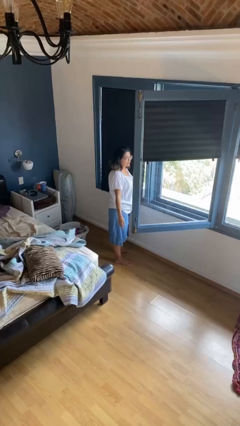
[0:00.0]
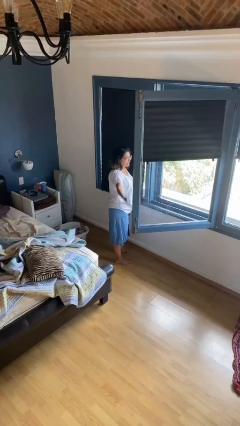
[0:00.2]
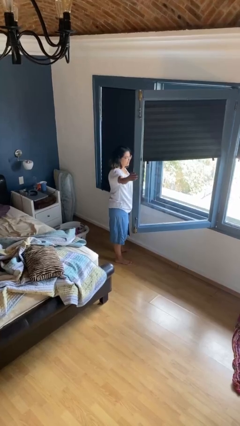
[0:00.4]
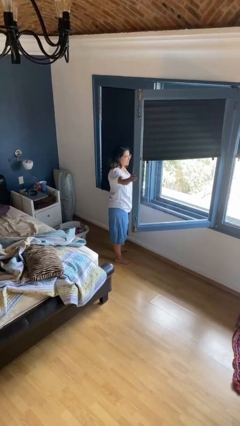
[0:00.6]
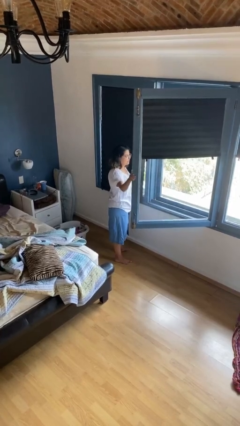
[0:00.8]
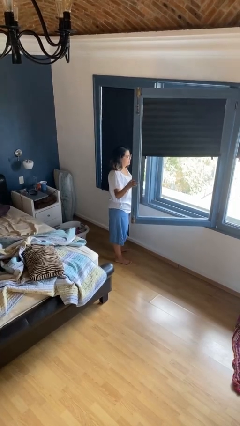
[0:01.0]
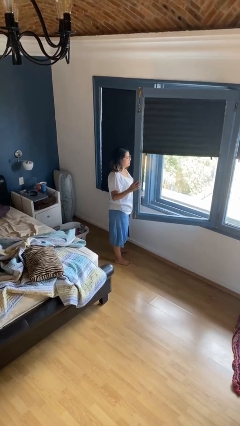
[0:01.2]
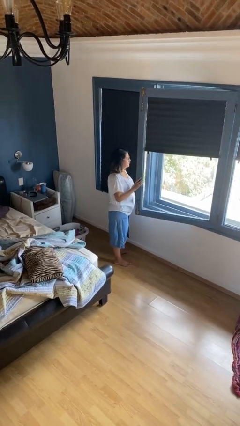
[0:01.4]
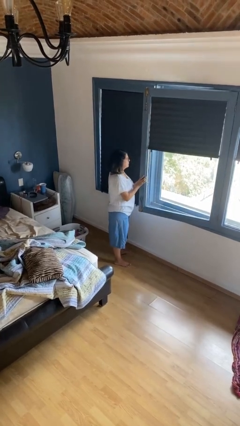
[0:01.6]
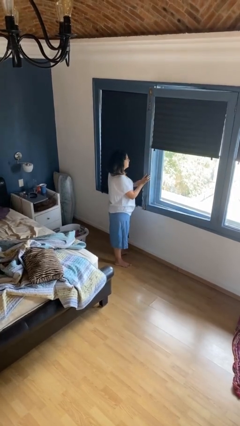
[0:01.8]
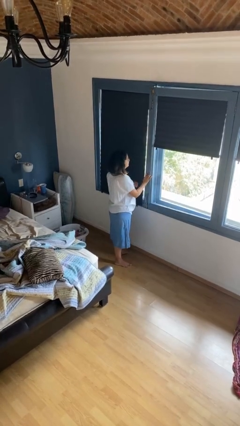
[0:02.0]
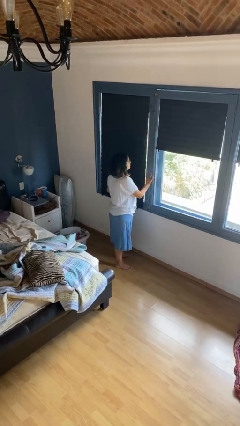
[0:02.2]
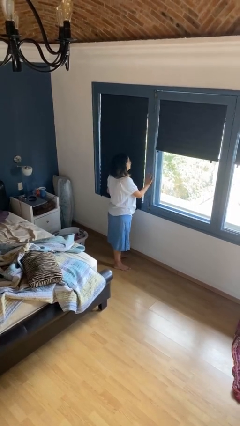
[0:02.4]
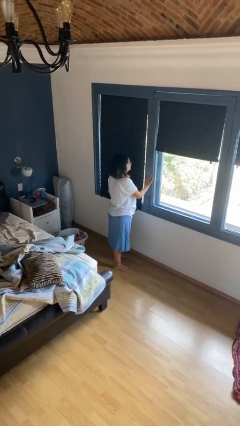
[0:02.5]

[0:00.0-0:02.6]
person closes home window

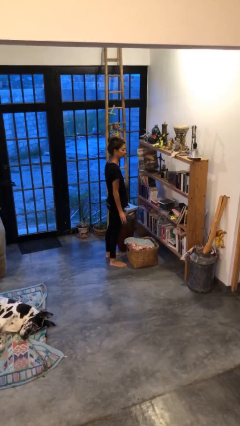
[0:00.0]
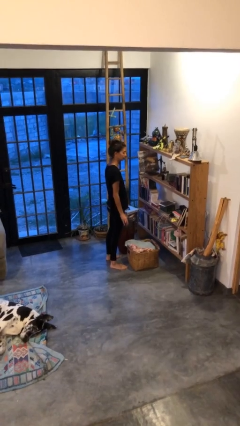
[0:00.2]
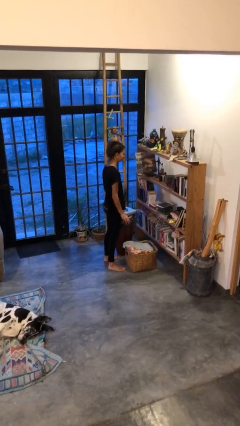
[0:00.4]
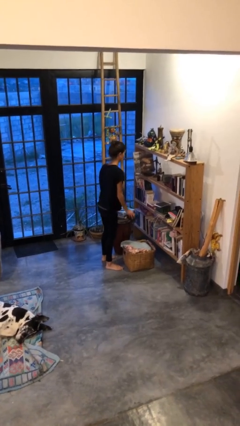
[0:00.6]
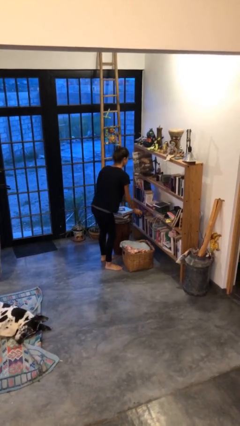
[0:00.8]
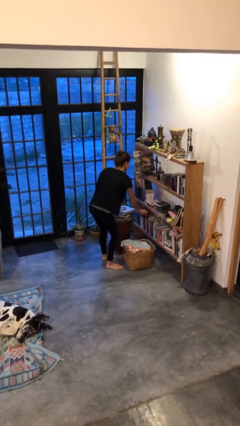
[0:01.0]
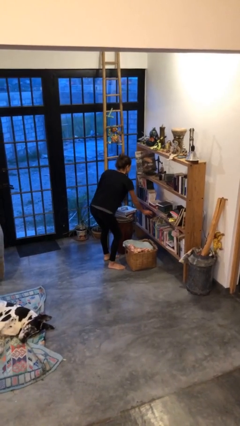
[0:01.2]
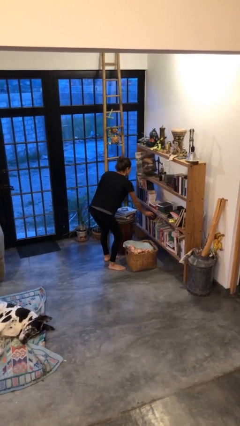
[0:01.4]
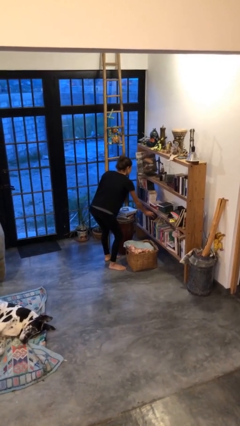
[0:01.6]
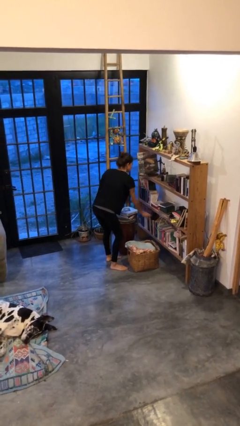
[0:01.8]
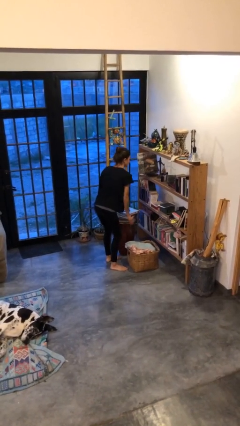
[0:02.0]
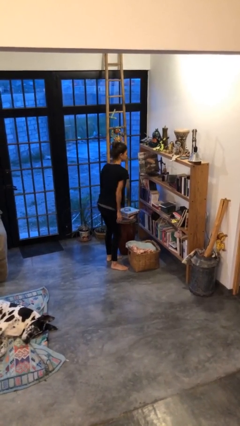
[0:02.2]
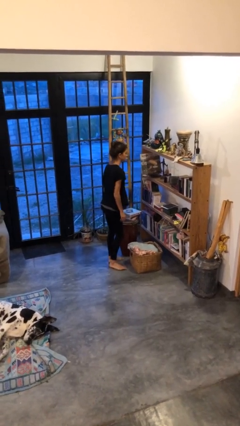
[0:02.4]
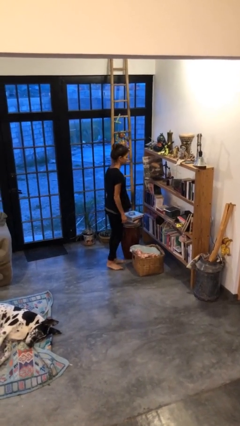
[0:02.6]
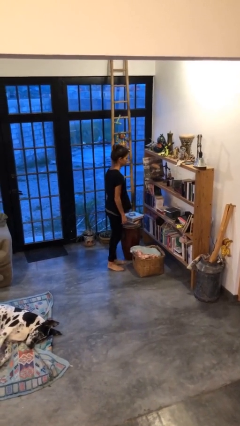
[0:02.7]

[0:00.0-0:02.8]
person puts down object into cabinet

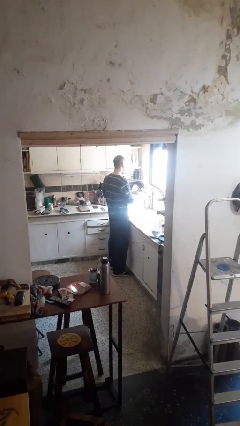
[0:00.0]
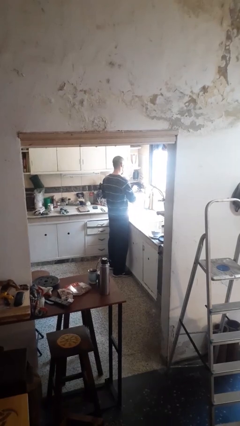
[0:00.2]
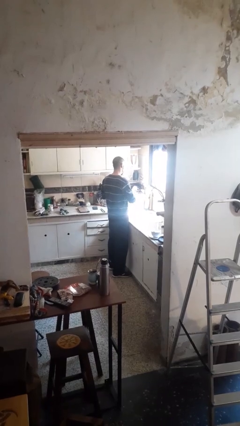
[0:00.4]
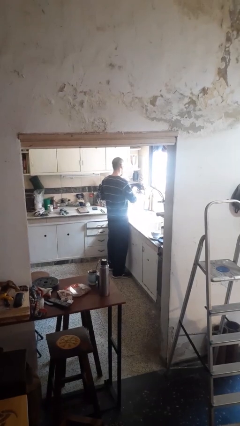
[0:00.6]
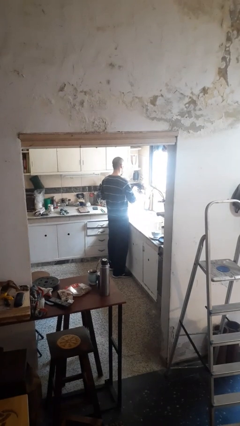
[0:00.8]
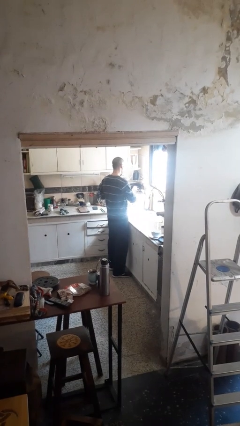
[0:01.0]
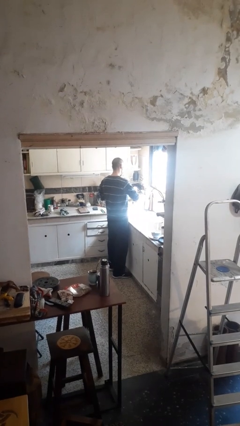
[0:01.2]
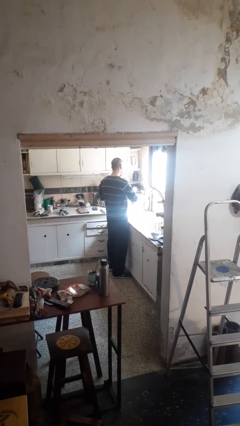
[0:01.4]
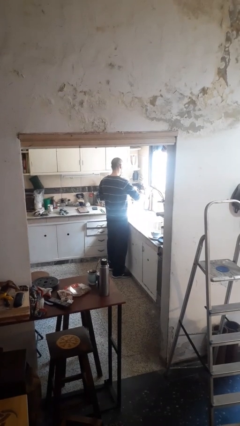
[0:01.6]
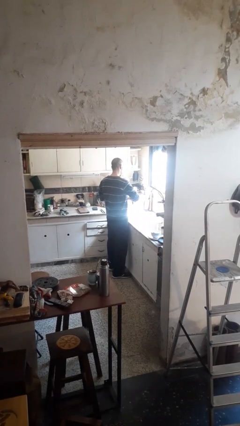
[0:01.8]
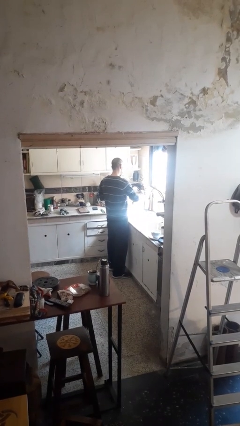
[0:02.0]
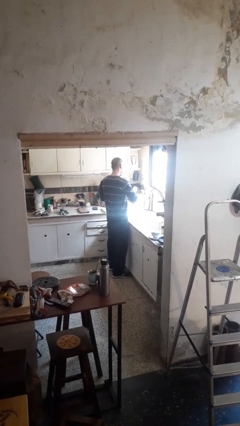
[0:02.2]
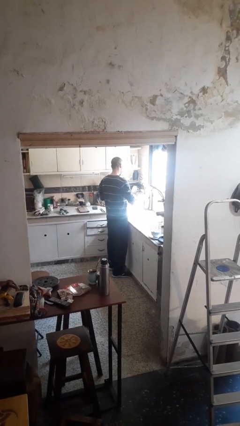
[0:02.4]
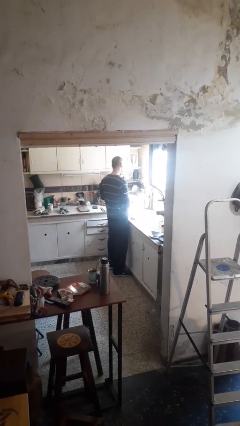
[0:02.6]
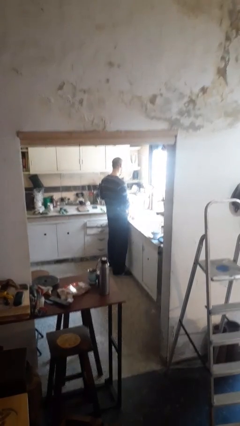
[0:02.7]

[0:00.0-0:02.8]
person washes dish

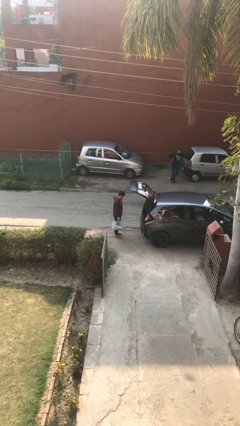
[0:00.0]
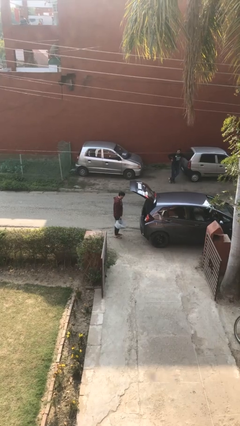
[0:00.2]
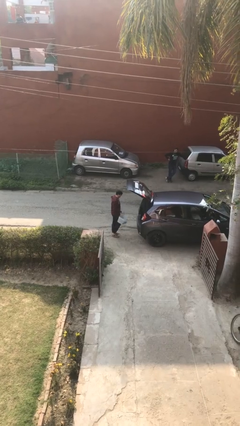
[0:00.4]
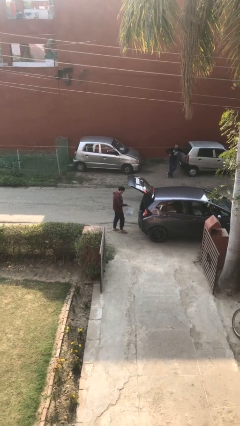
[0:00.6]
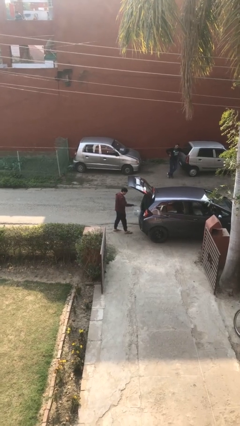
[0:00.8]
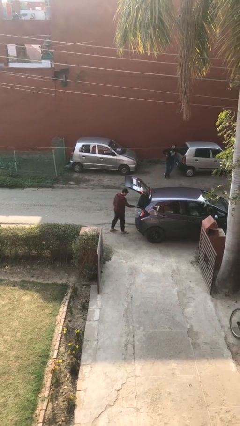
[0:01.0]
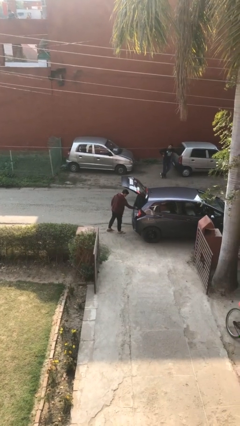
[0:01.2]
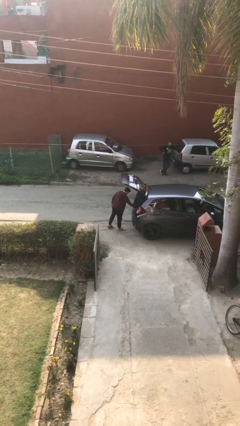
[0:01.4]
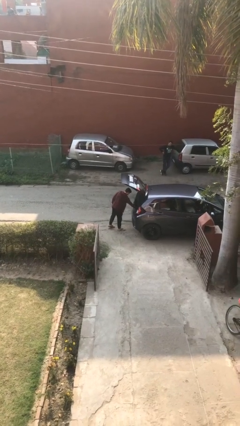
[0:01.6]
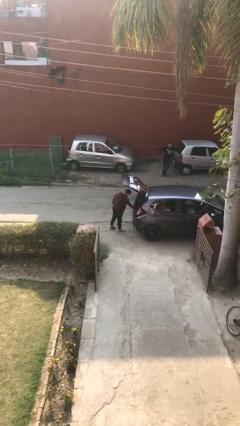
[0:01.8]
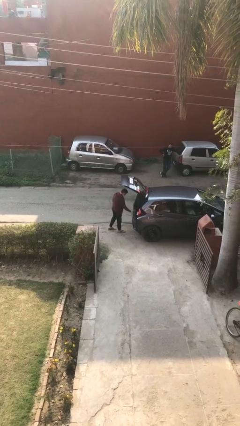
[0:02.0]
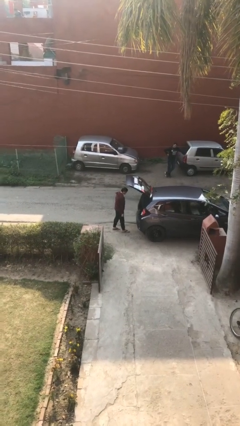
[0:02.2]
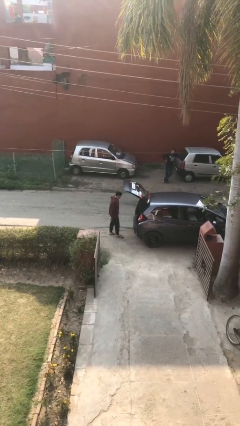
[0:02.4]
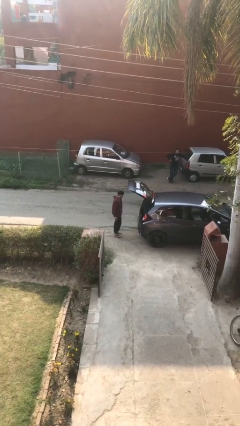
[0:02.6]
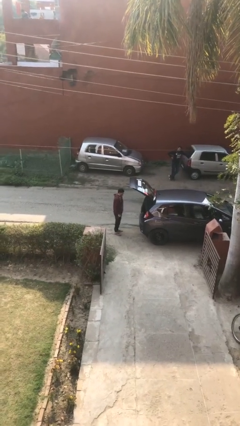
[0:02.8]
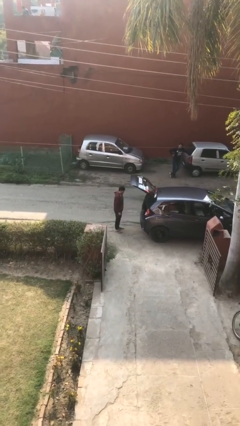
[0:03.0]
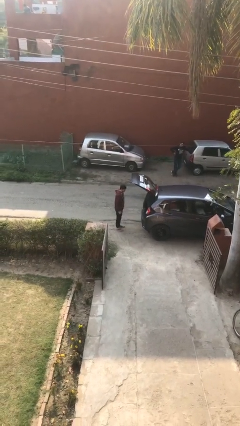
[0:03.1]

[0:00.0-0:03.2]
person loads car

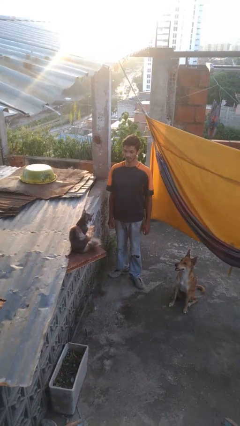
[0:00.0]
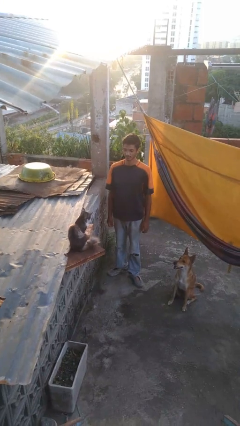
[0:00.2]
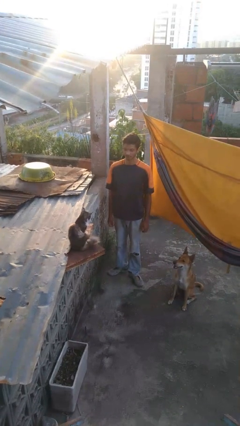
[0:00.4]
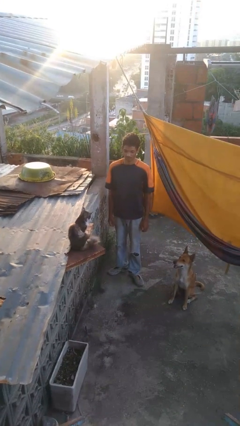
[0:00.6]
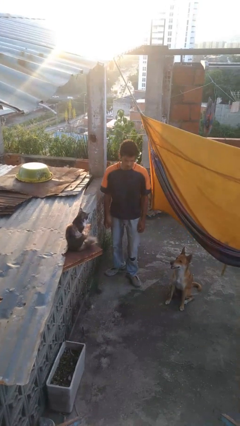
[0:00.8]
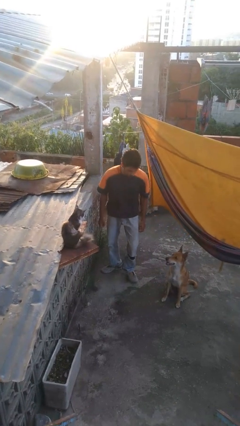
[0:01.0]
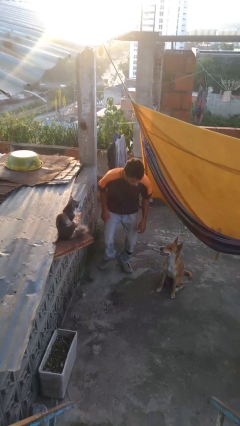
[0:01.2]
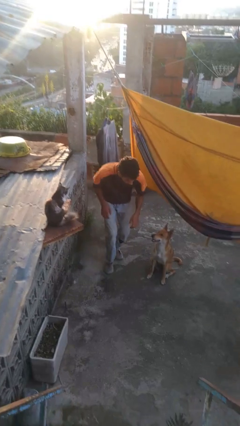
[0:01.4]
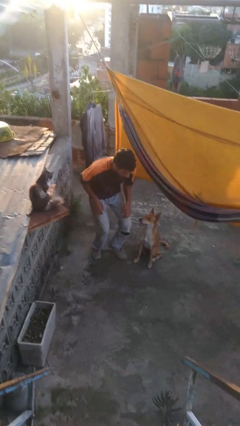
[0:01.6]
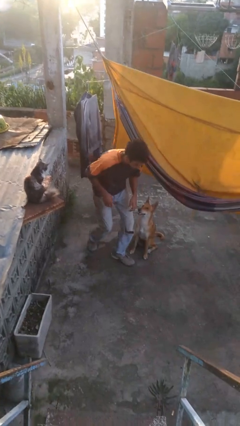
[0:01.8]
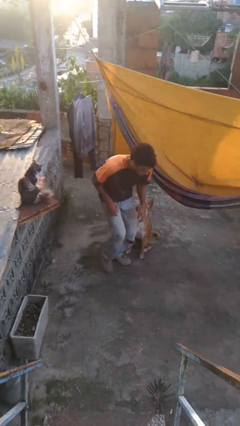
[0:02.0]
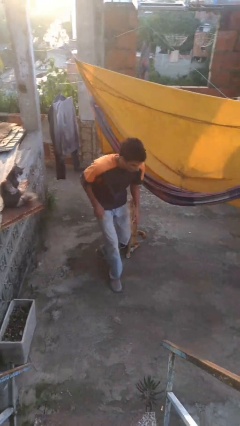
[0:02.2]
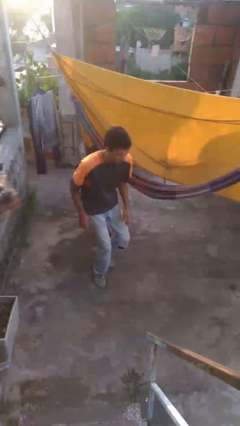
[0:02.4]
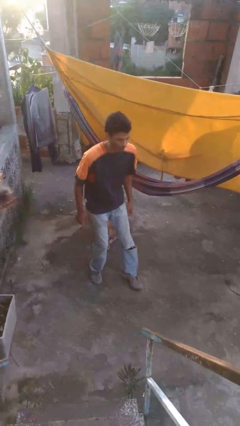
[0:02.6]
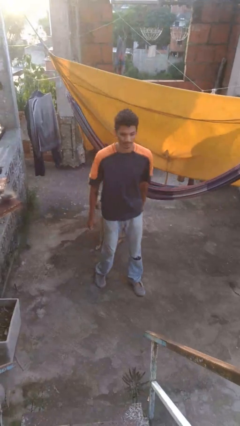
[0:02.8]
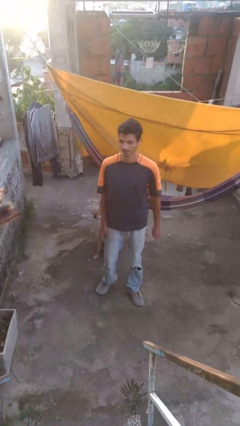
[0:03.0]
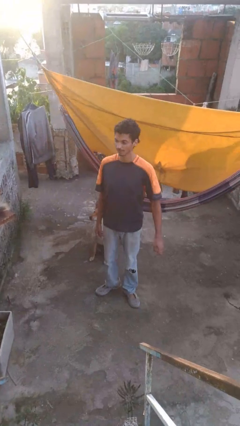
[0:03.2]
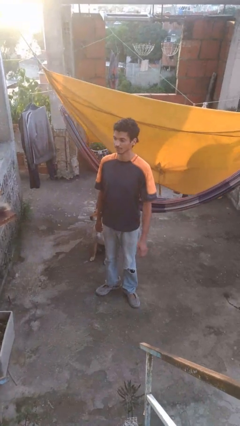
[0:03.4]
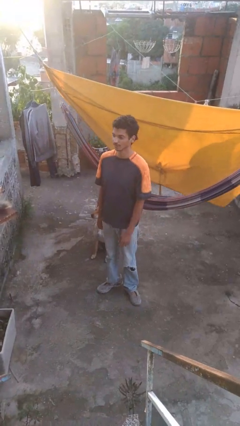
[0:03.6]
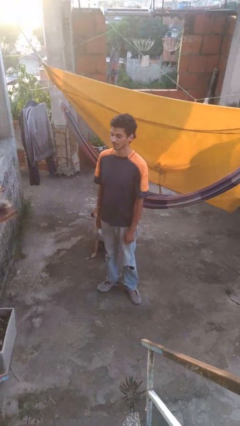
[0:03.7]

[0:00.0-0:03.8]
person walks tiptoe

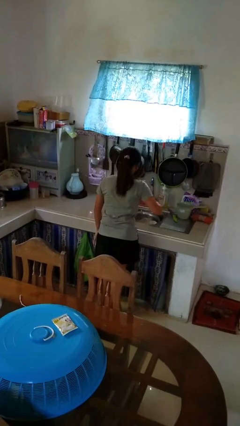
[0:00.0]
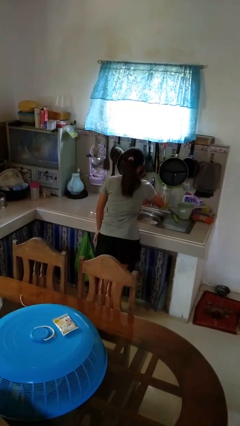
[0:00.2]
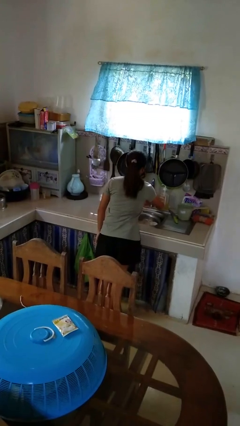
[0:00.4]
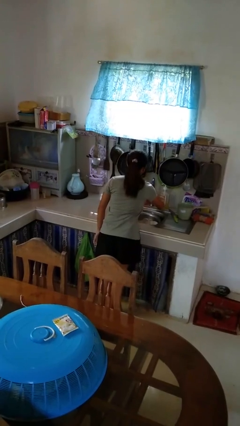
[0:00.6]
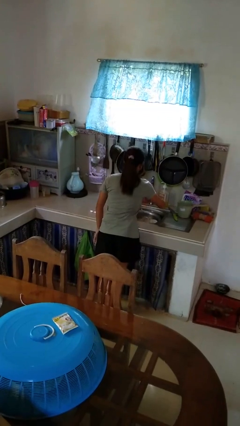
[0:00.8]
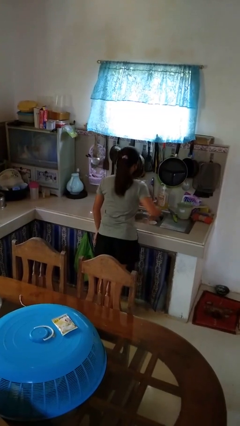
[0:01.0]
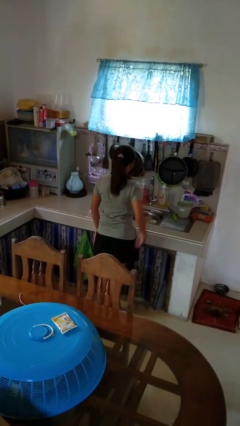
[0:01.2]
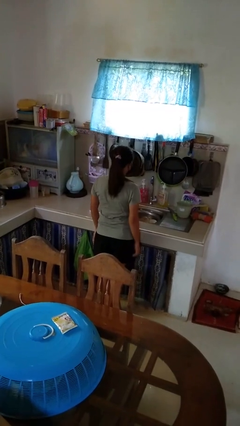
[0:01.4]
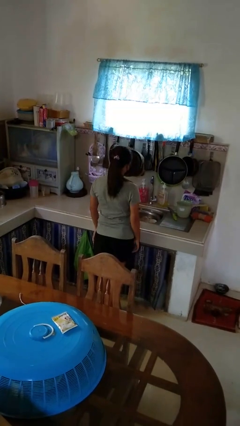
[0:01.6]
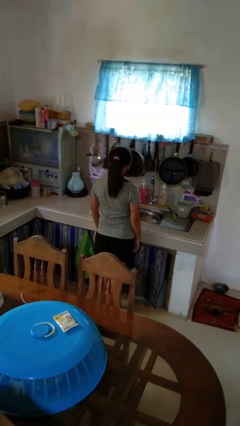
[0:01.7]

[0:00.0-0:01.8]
person turns off faucet

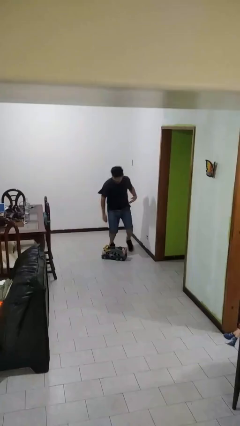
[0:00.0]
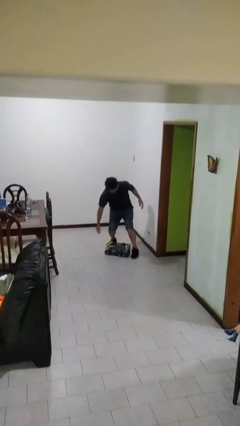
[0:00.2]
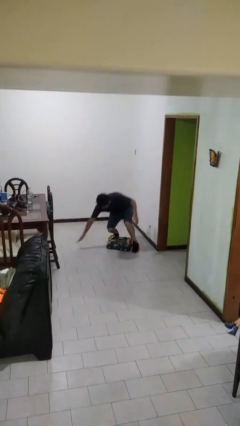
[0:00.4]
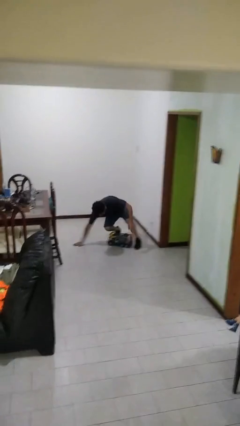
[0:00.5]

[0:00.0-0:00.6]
person trips on object on floor
